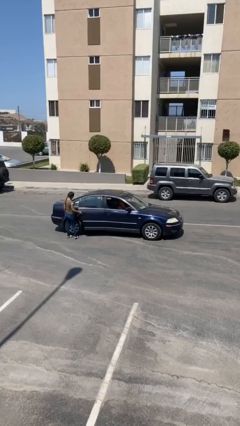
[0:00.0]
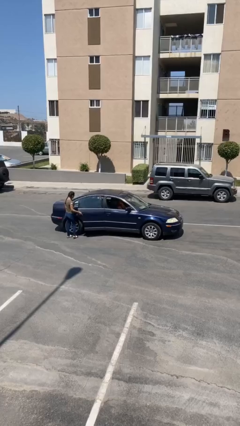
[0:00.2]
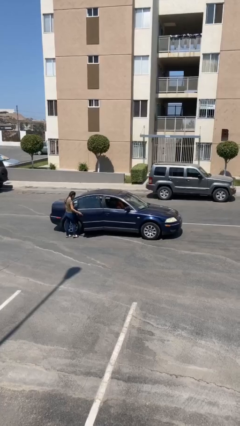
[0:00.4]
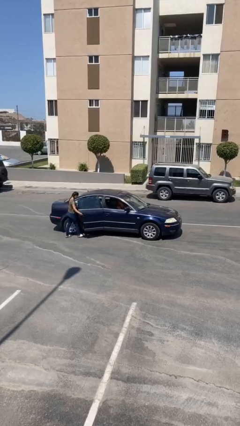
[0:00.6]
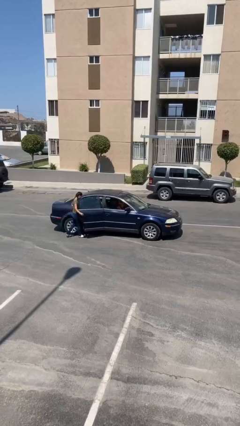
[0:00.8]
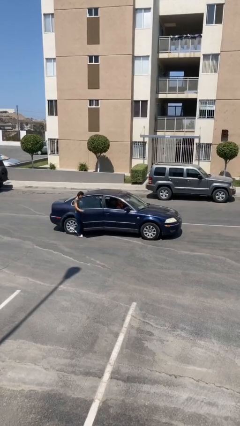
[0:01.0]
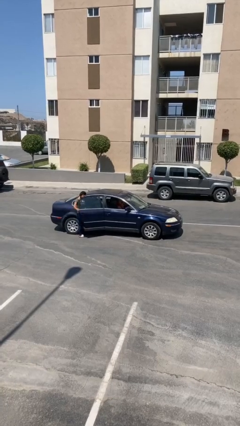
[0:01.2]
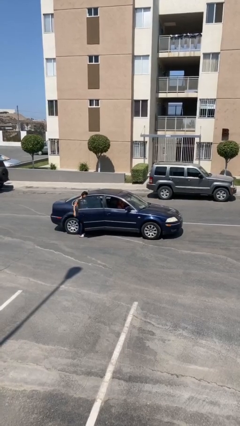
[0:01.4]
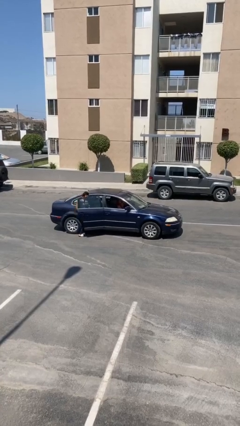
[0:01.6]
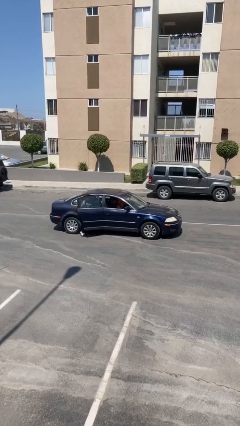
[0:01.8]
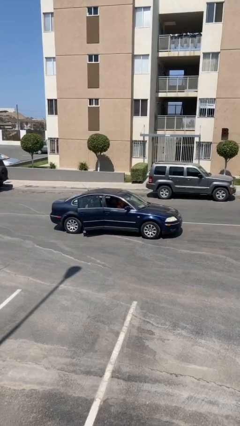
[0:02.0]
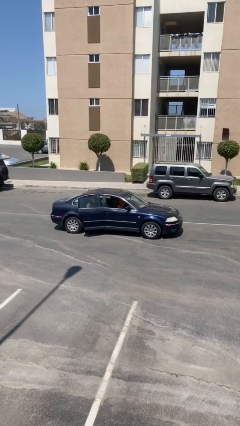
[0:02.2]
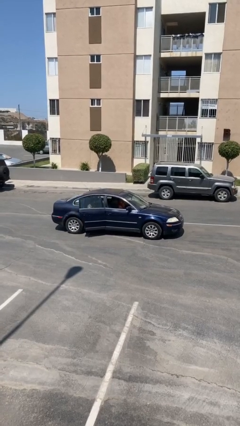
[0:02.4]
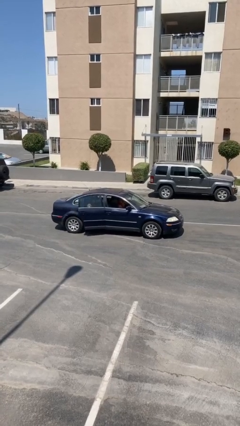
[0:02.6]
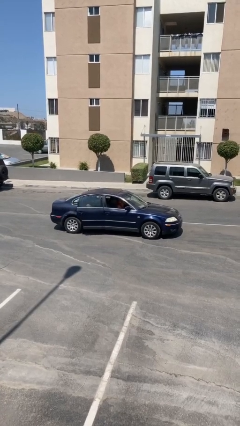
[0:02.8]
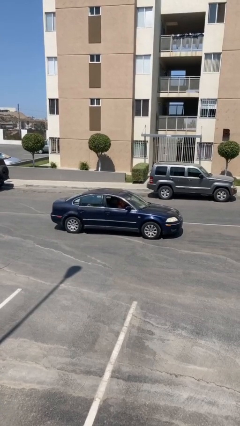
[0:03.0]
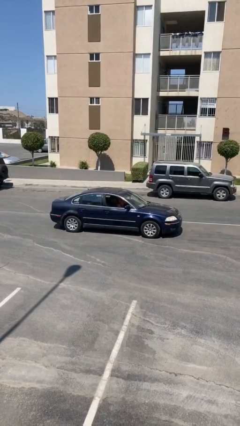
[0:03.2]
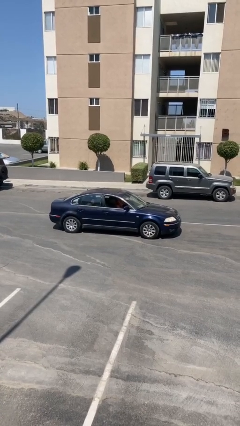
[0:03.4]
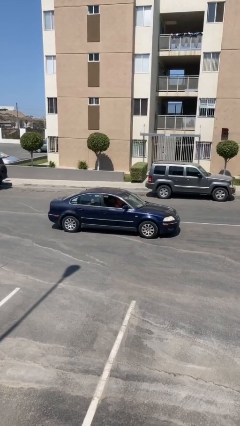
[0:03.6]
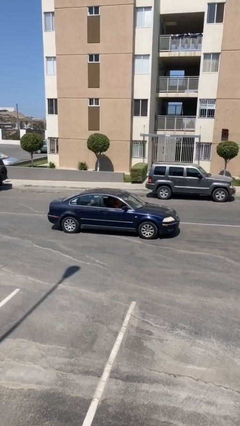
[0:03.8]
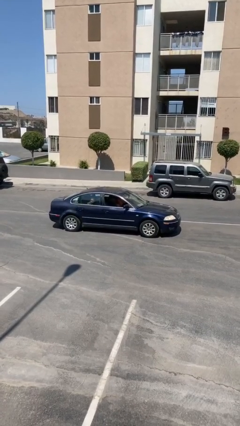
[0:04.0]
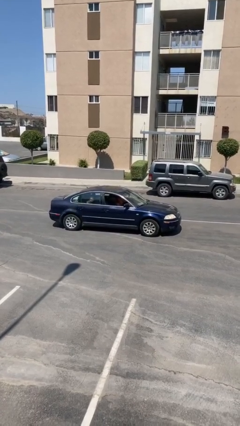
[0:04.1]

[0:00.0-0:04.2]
car picks up person

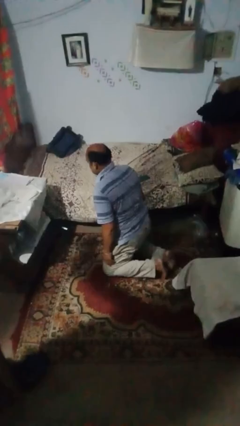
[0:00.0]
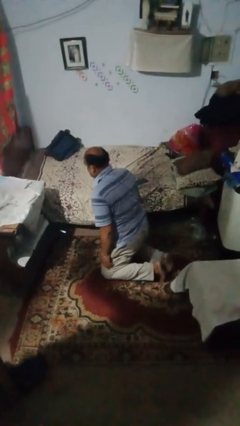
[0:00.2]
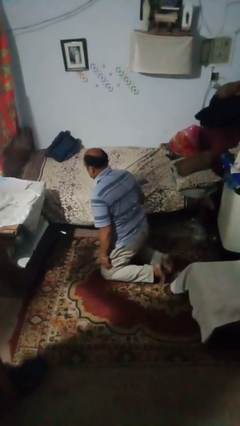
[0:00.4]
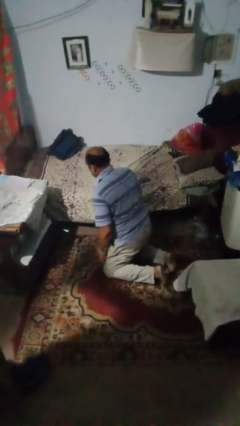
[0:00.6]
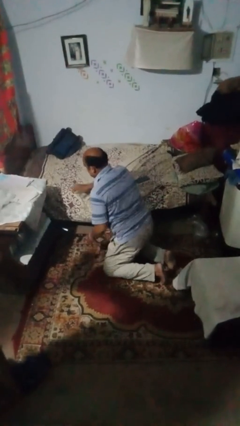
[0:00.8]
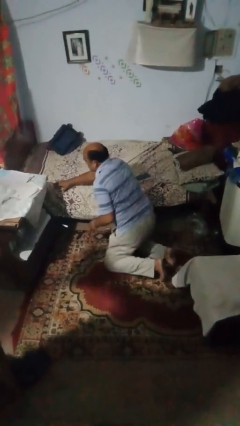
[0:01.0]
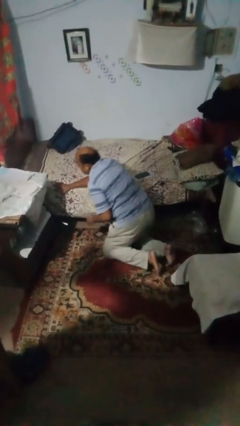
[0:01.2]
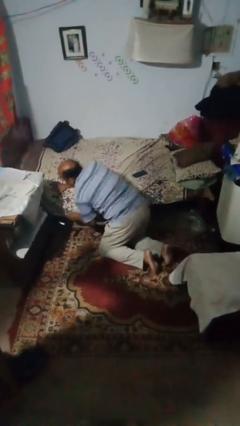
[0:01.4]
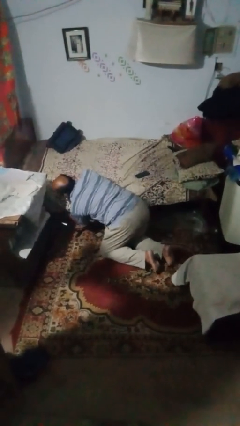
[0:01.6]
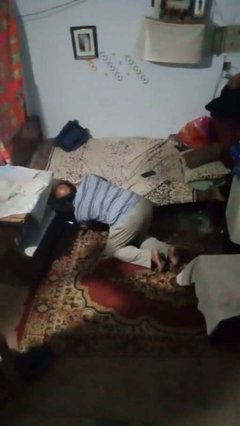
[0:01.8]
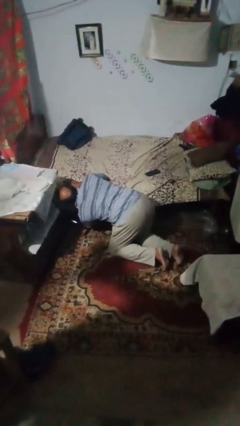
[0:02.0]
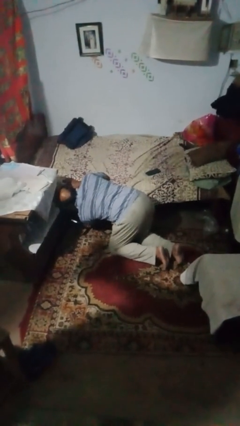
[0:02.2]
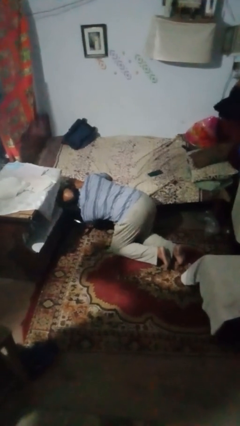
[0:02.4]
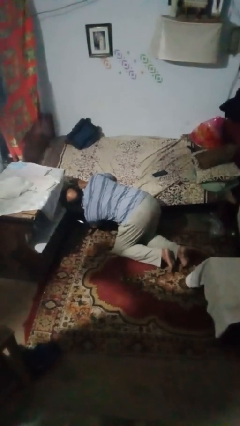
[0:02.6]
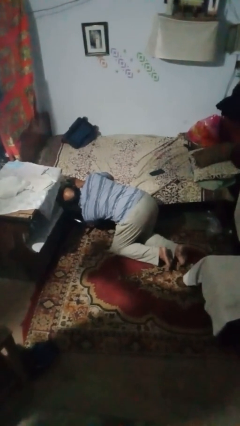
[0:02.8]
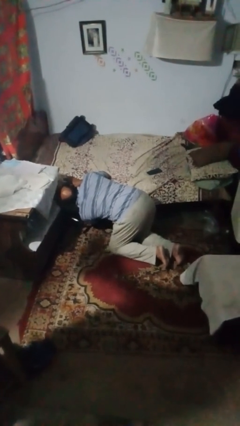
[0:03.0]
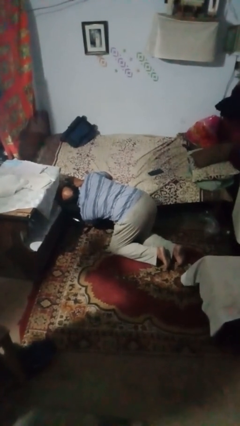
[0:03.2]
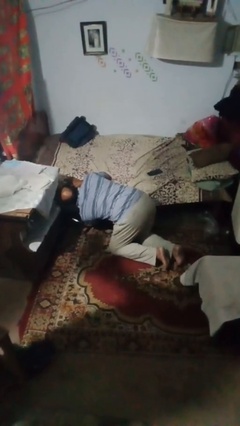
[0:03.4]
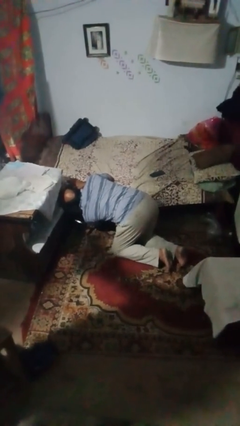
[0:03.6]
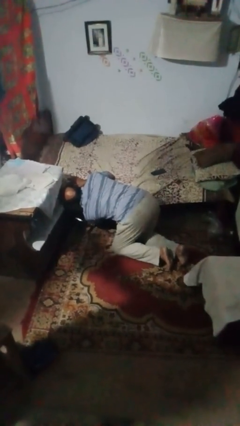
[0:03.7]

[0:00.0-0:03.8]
person searches under bed

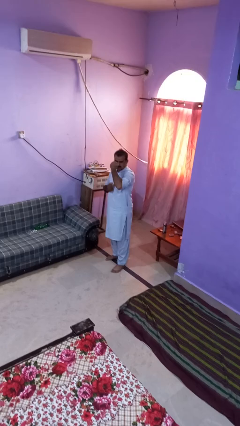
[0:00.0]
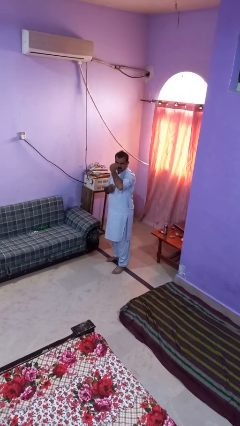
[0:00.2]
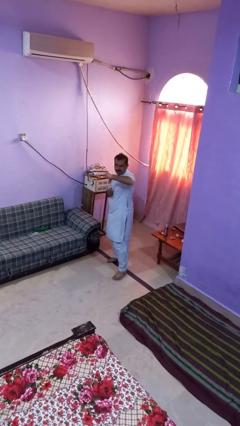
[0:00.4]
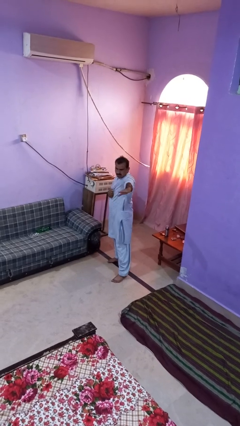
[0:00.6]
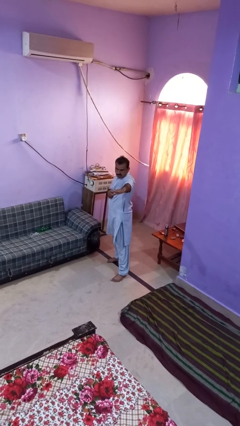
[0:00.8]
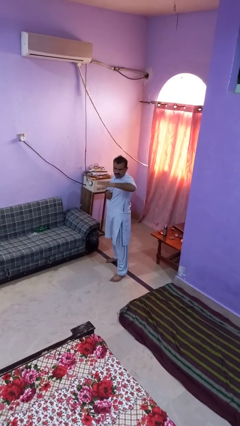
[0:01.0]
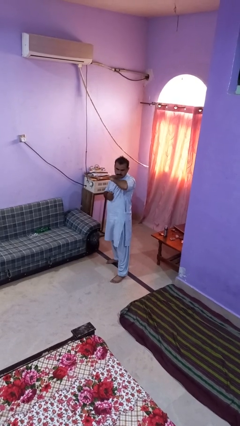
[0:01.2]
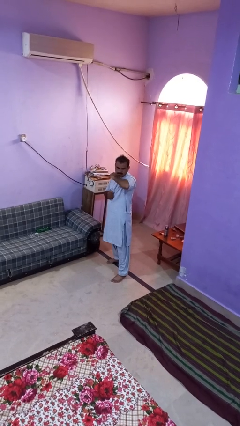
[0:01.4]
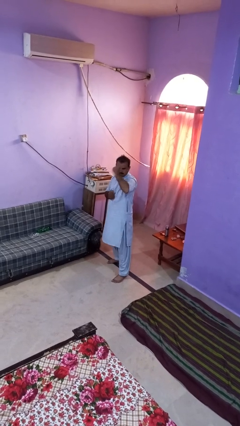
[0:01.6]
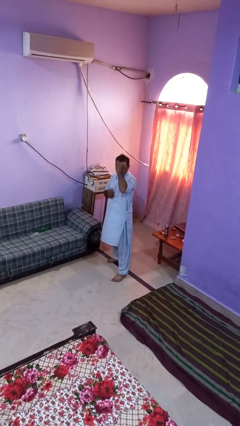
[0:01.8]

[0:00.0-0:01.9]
person karate chop

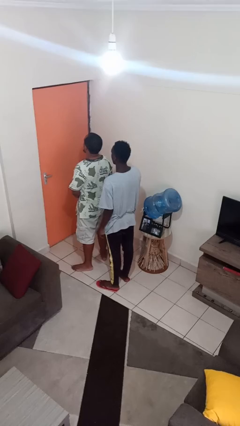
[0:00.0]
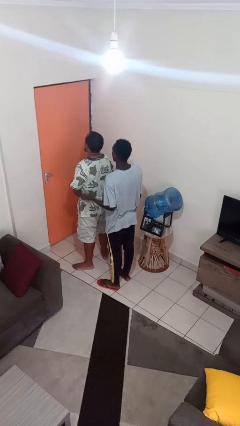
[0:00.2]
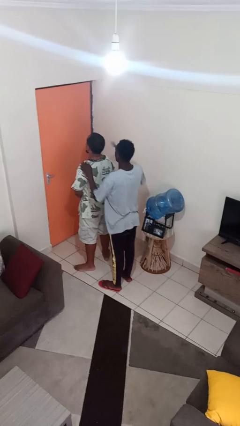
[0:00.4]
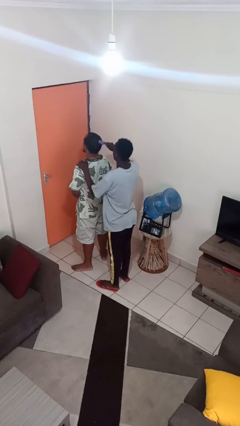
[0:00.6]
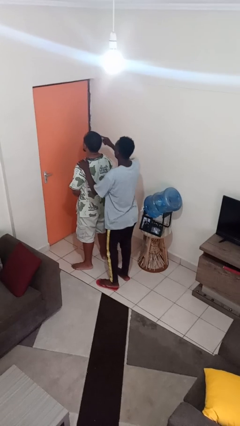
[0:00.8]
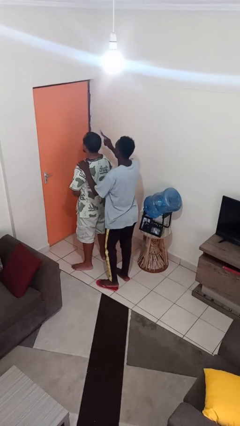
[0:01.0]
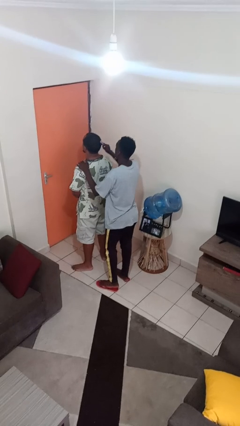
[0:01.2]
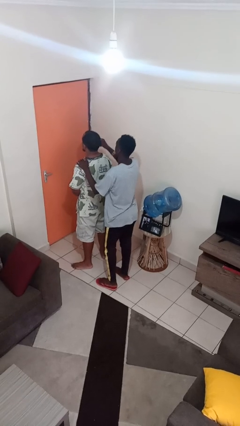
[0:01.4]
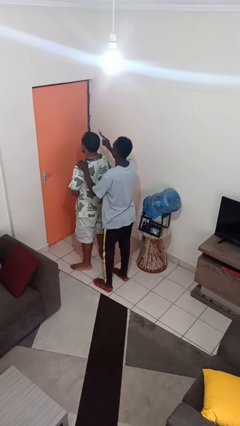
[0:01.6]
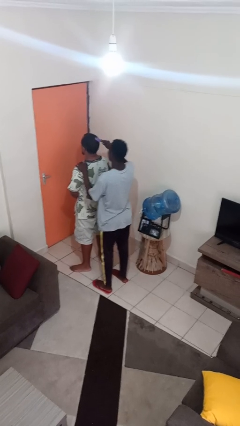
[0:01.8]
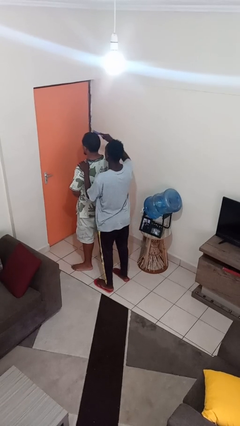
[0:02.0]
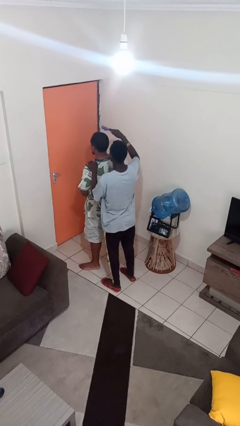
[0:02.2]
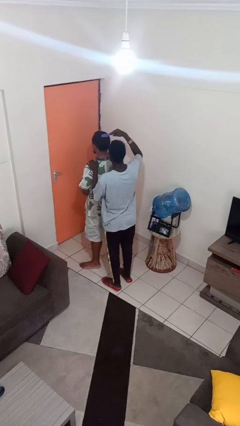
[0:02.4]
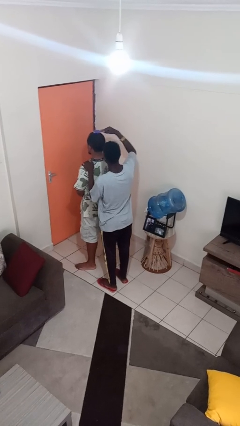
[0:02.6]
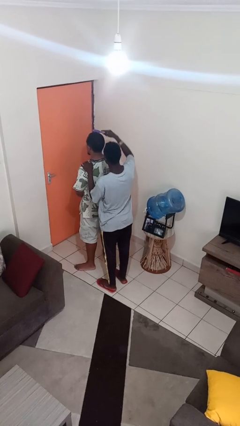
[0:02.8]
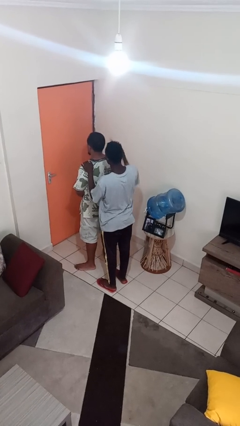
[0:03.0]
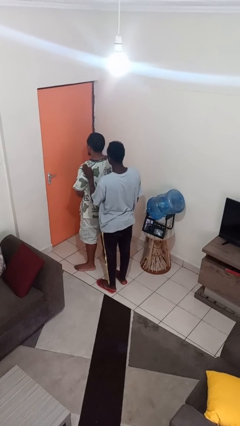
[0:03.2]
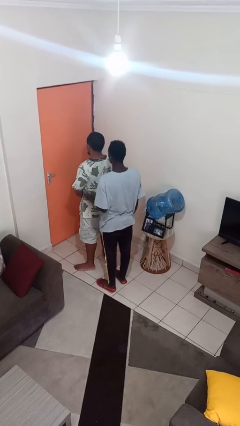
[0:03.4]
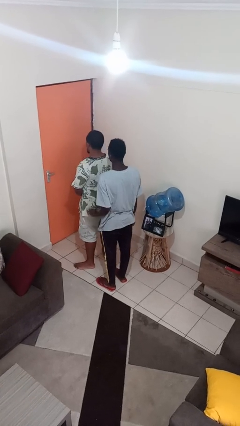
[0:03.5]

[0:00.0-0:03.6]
person brushes hair of person

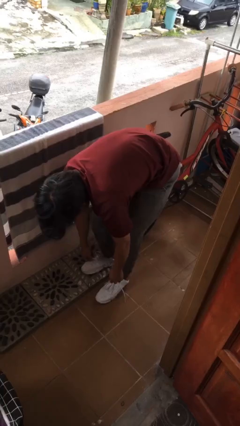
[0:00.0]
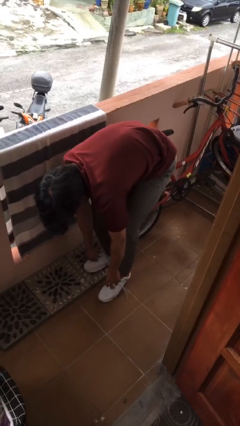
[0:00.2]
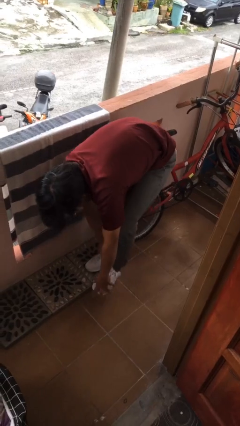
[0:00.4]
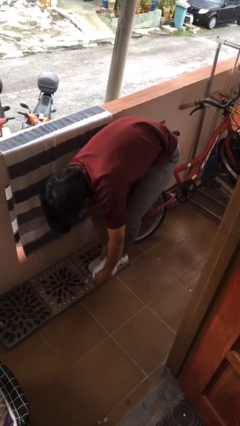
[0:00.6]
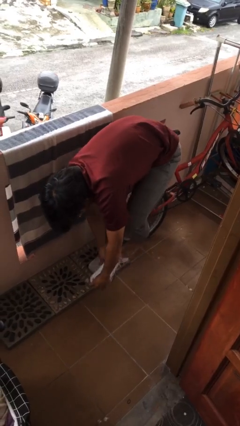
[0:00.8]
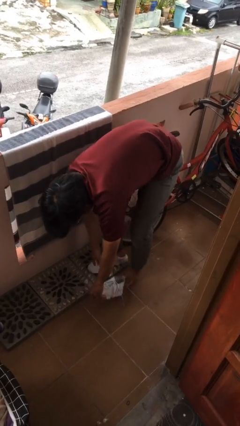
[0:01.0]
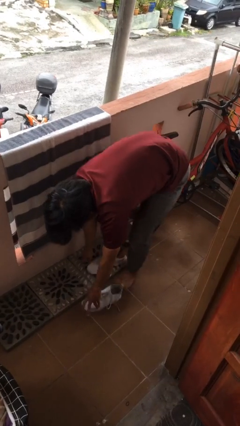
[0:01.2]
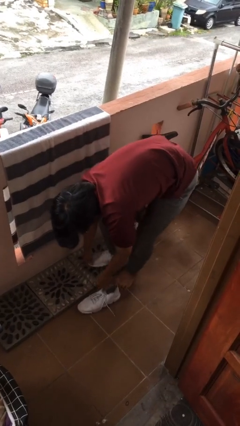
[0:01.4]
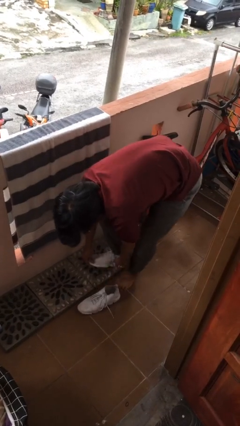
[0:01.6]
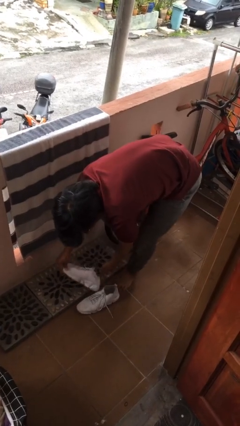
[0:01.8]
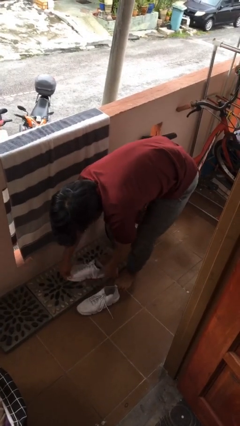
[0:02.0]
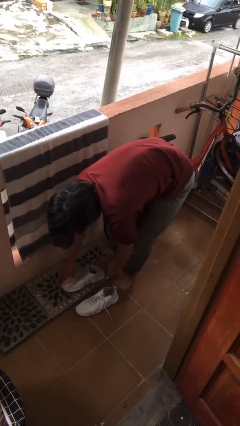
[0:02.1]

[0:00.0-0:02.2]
person takes off shoes

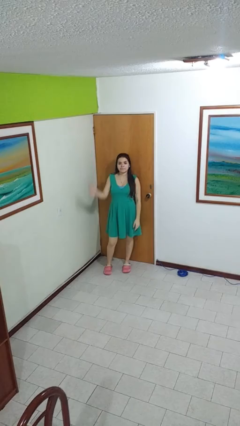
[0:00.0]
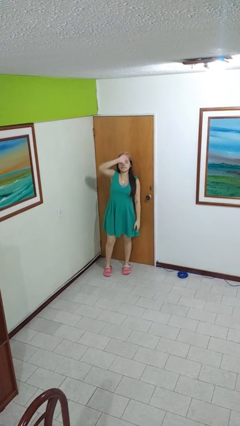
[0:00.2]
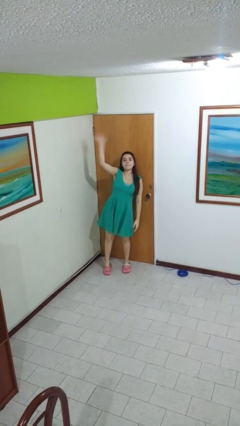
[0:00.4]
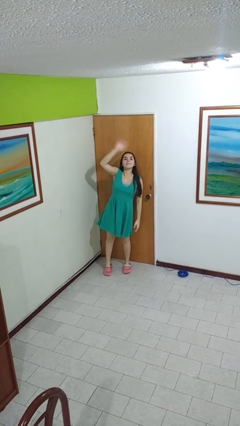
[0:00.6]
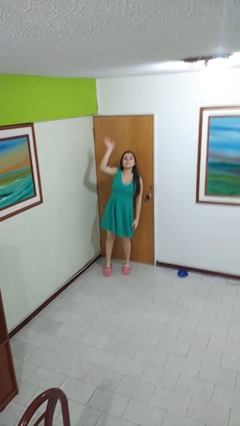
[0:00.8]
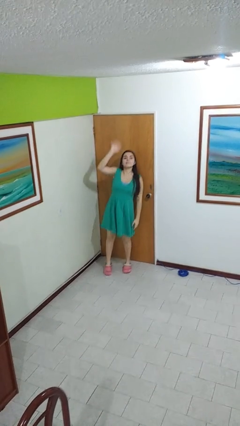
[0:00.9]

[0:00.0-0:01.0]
person waves at person

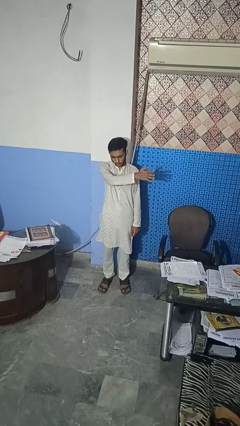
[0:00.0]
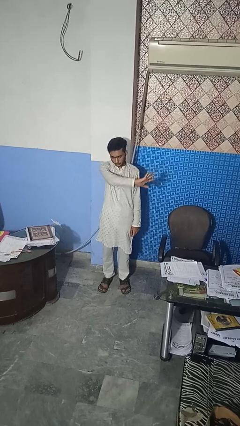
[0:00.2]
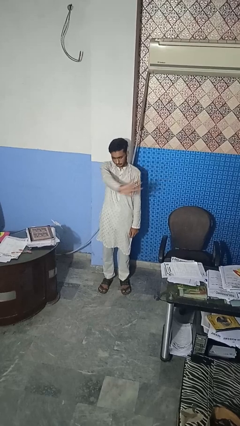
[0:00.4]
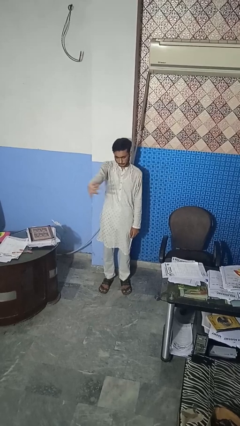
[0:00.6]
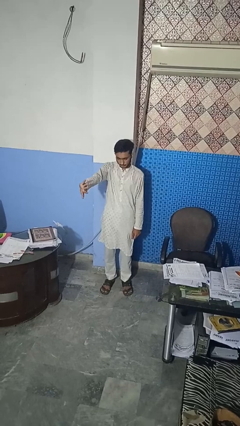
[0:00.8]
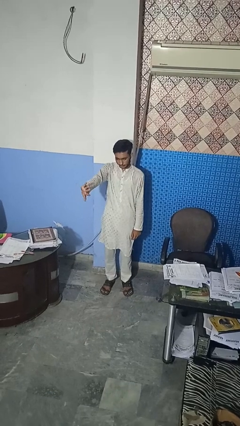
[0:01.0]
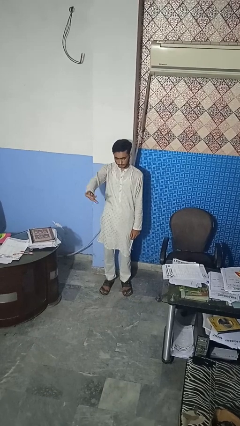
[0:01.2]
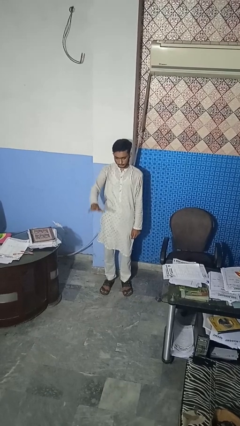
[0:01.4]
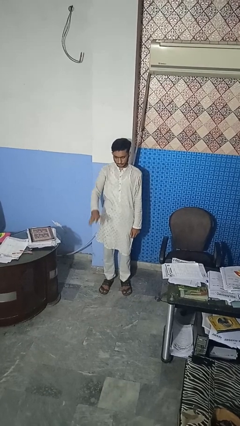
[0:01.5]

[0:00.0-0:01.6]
person gestures swipe right
